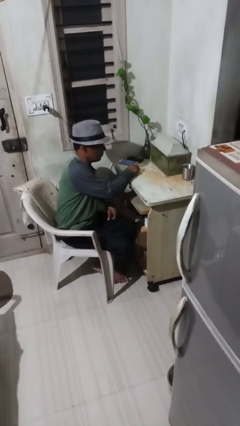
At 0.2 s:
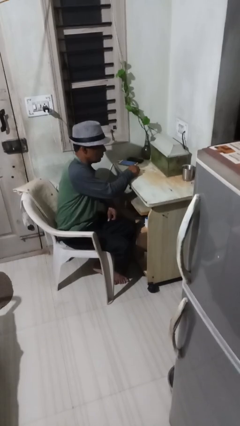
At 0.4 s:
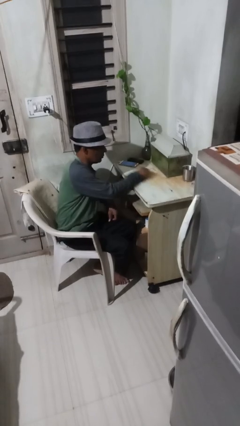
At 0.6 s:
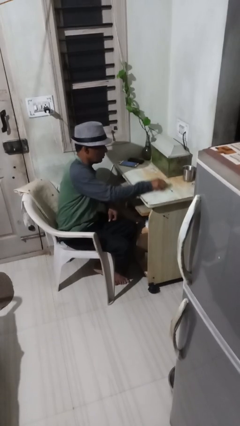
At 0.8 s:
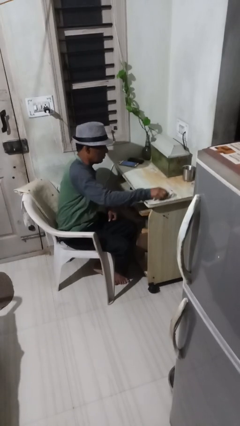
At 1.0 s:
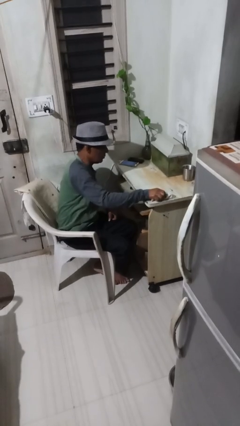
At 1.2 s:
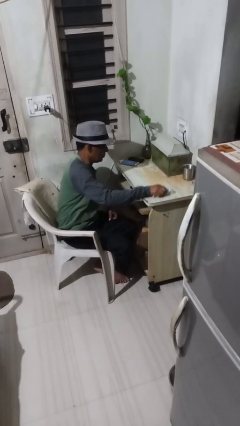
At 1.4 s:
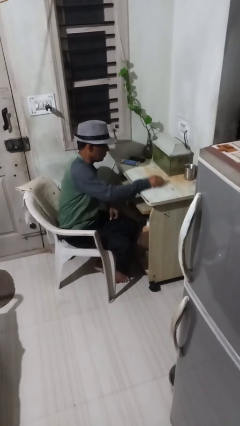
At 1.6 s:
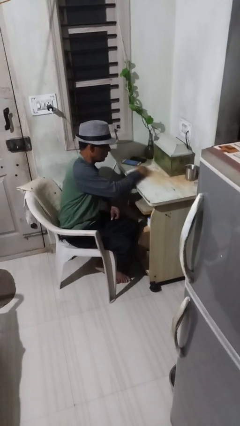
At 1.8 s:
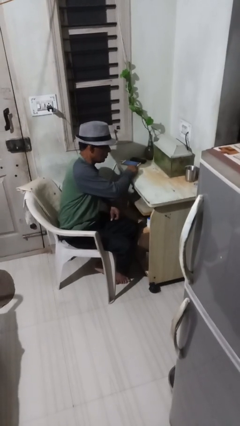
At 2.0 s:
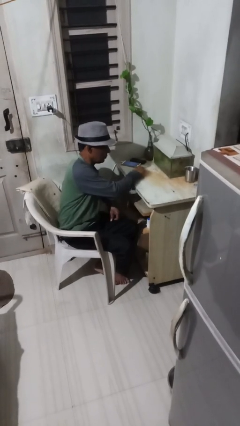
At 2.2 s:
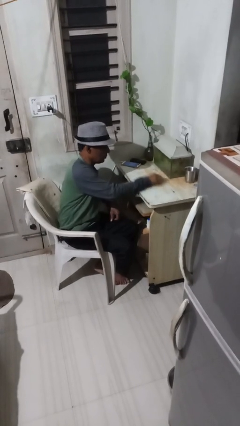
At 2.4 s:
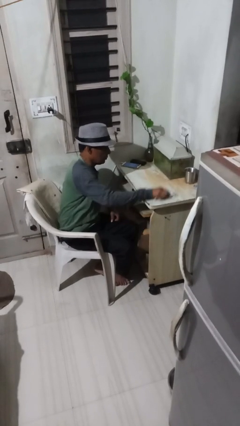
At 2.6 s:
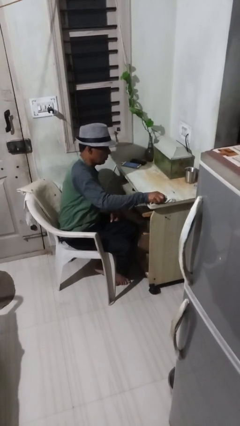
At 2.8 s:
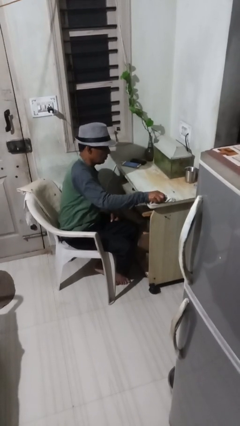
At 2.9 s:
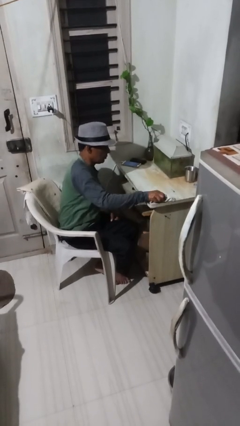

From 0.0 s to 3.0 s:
person cleans table with rag

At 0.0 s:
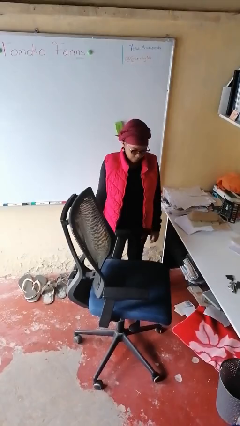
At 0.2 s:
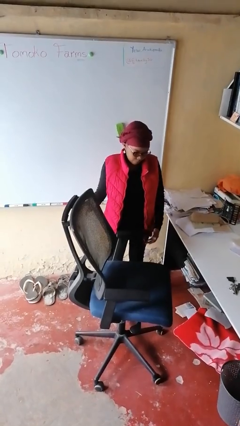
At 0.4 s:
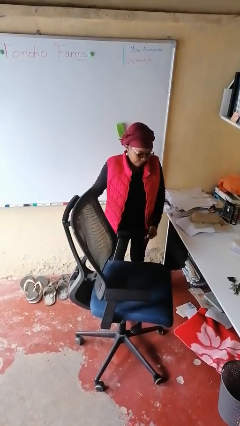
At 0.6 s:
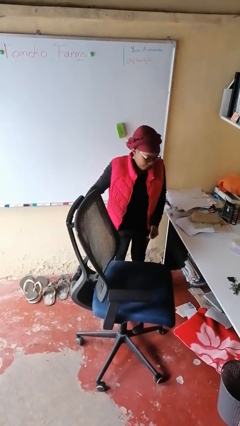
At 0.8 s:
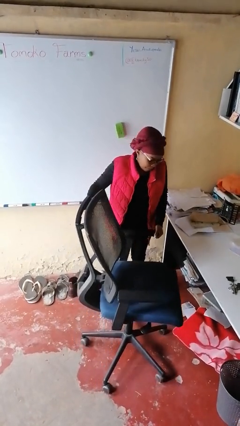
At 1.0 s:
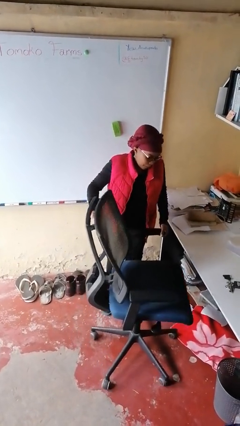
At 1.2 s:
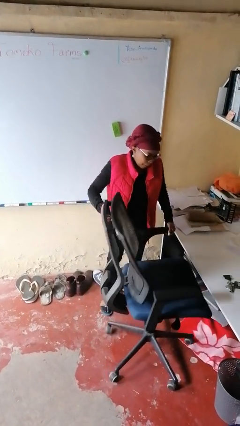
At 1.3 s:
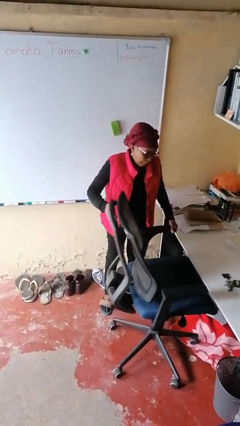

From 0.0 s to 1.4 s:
person pushes in chair

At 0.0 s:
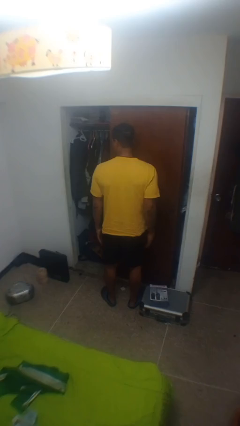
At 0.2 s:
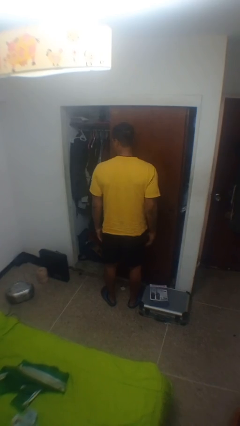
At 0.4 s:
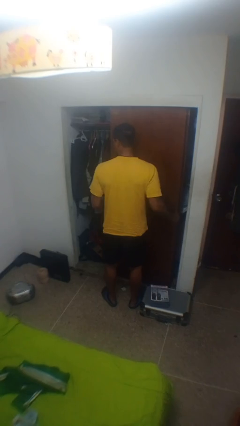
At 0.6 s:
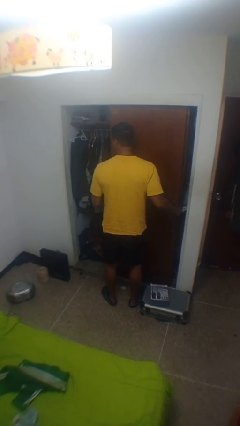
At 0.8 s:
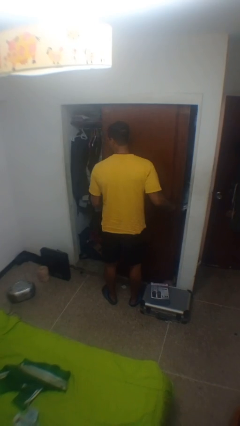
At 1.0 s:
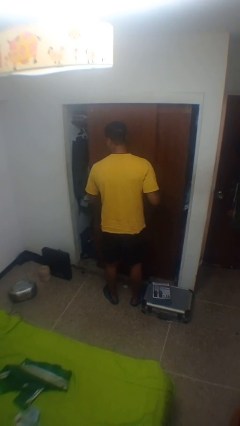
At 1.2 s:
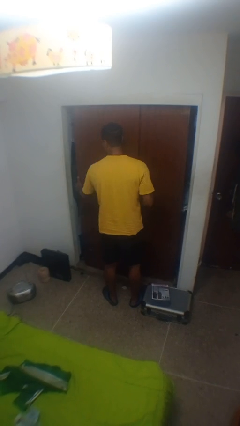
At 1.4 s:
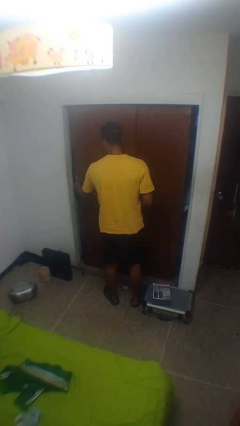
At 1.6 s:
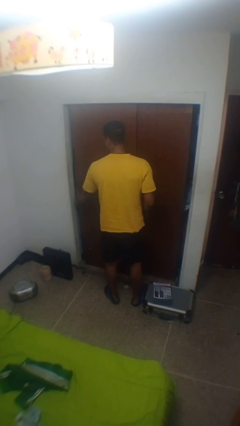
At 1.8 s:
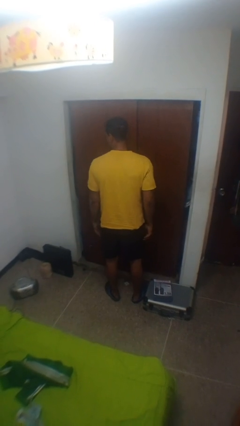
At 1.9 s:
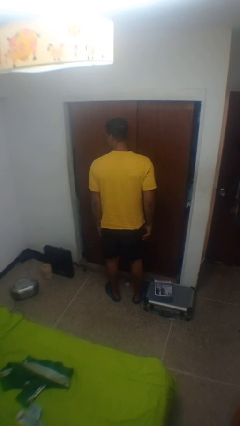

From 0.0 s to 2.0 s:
person closes closet door

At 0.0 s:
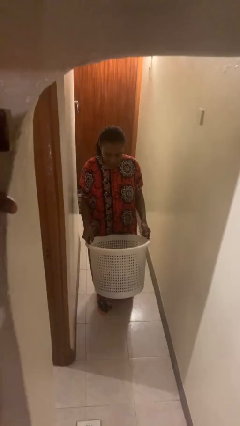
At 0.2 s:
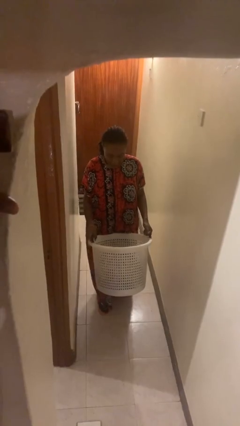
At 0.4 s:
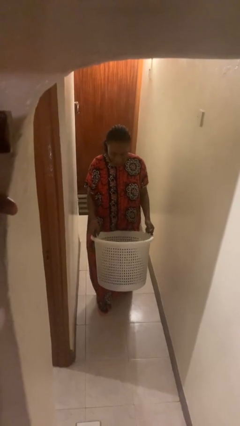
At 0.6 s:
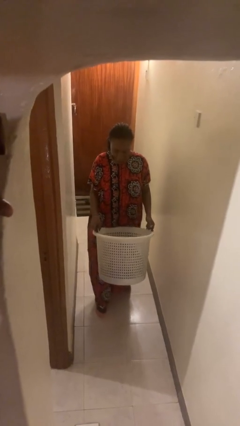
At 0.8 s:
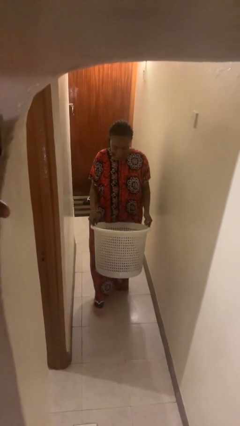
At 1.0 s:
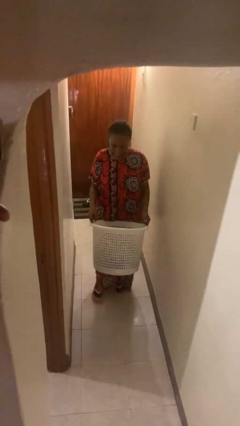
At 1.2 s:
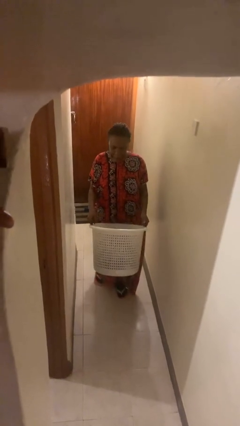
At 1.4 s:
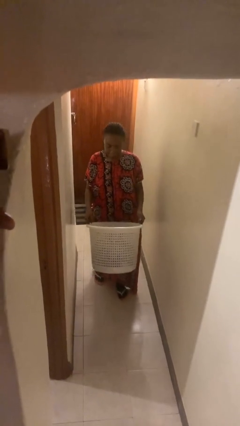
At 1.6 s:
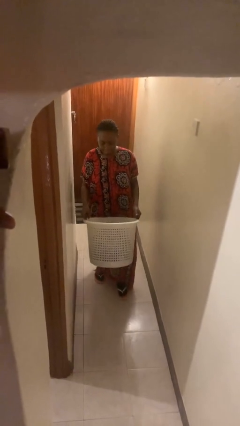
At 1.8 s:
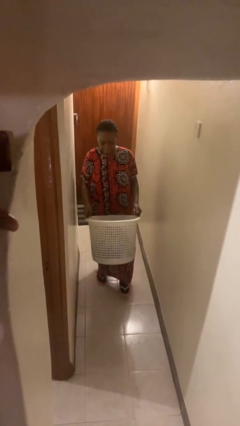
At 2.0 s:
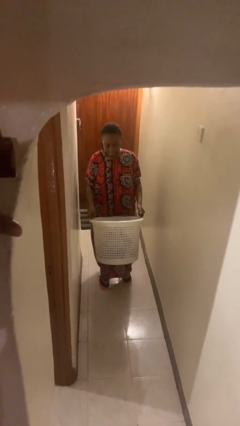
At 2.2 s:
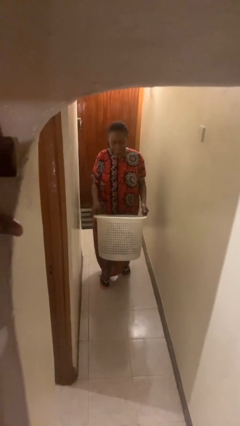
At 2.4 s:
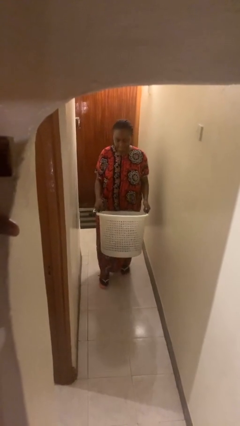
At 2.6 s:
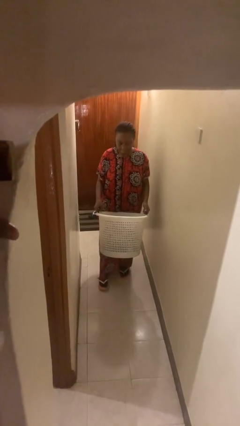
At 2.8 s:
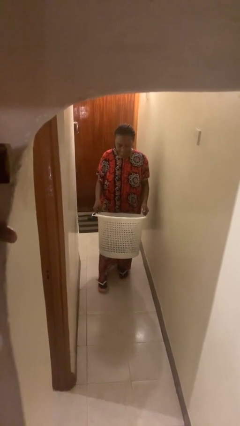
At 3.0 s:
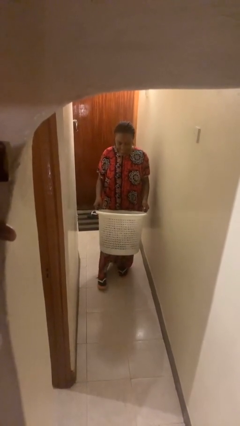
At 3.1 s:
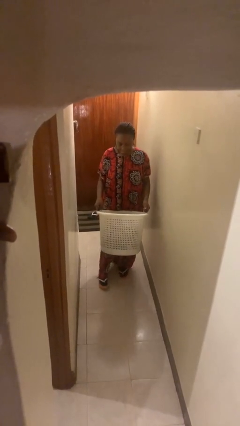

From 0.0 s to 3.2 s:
person carries laundry basket

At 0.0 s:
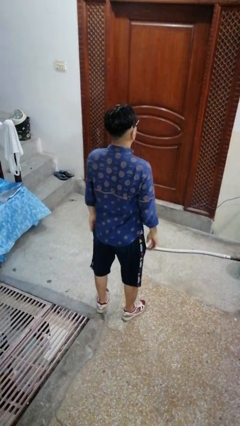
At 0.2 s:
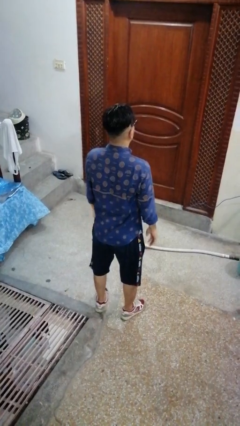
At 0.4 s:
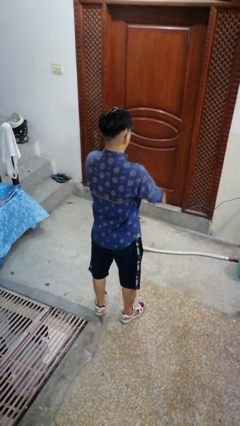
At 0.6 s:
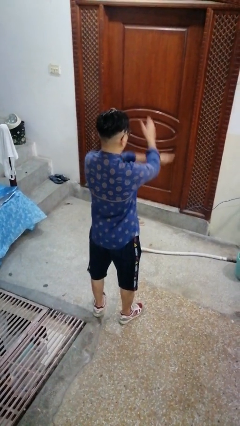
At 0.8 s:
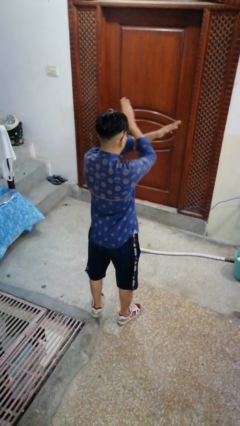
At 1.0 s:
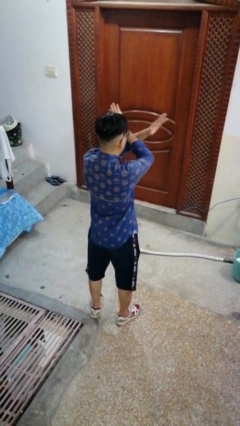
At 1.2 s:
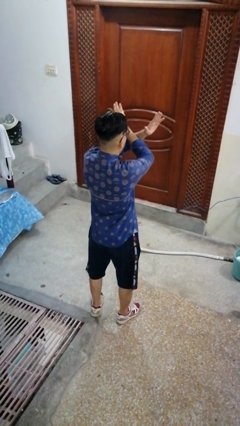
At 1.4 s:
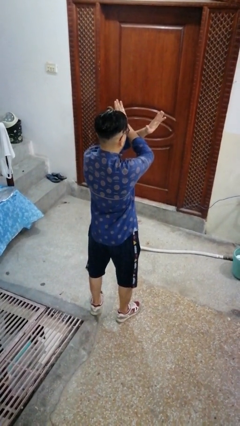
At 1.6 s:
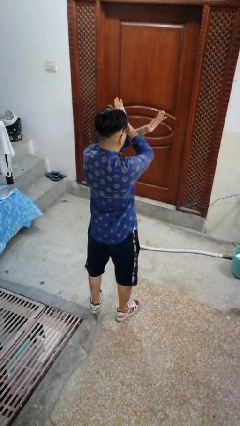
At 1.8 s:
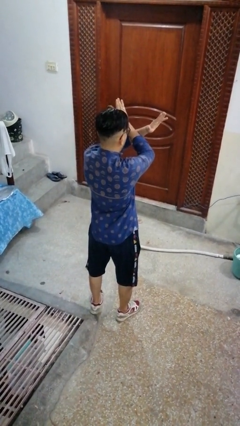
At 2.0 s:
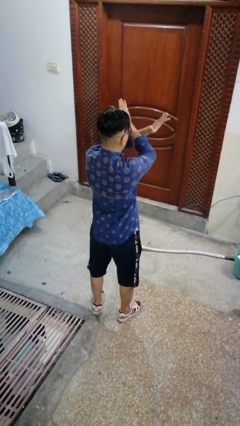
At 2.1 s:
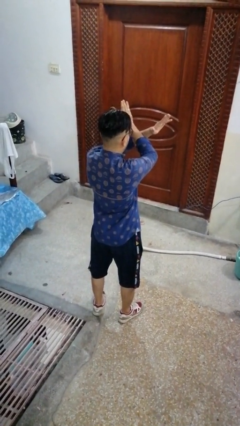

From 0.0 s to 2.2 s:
person gestures arms x

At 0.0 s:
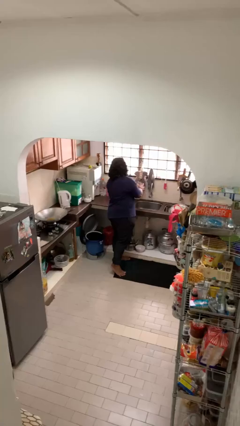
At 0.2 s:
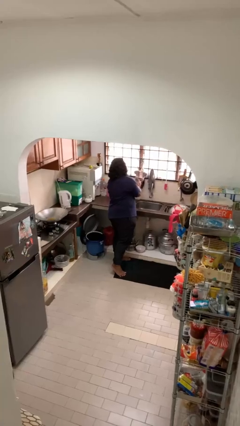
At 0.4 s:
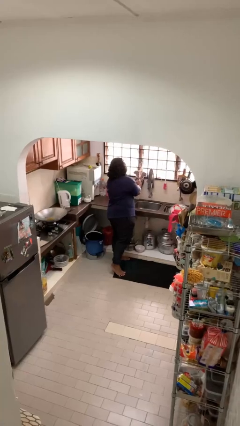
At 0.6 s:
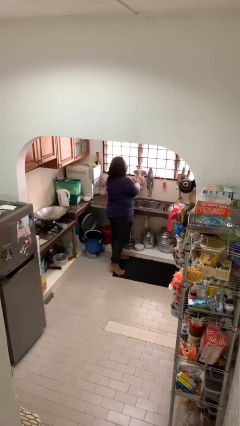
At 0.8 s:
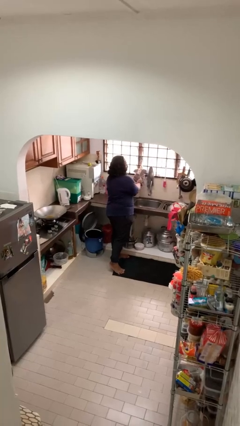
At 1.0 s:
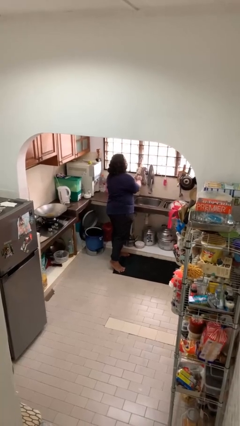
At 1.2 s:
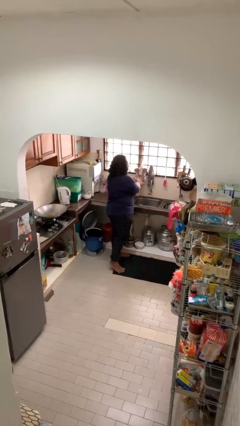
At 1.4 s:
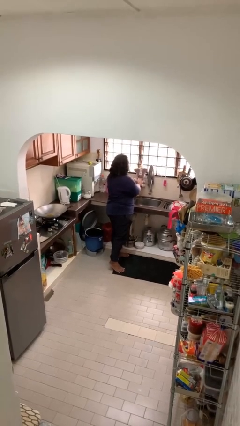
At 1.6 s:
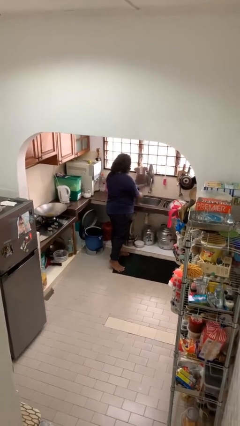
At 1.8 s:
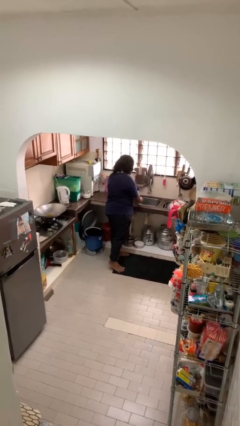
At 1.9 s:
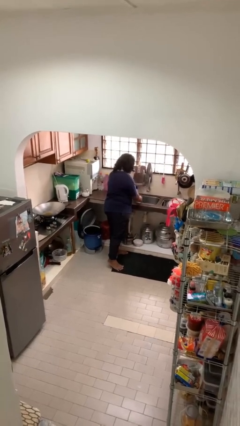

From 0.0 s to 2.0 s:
person dries hands with towel

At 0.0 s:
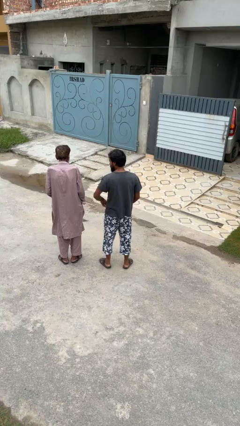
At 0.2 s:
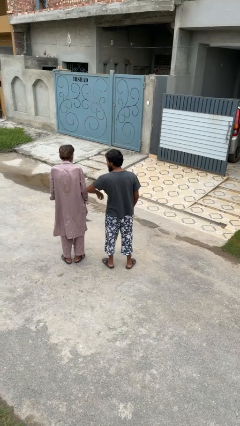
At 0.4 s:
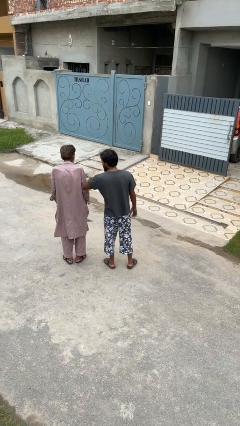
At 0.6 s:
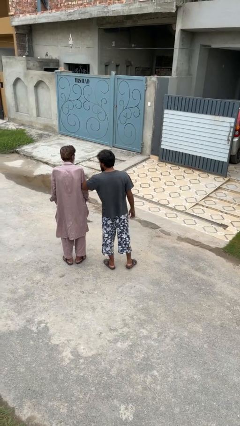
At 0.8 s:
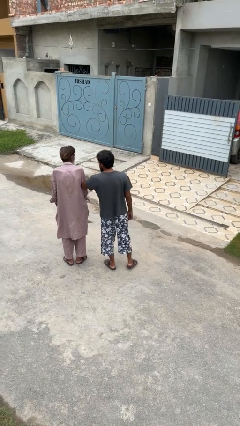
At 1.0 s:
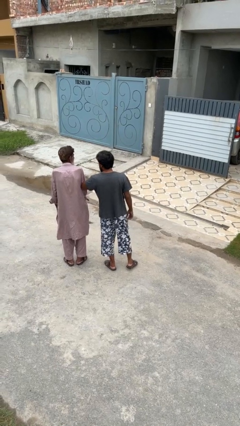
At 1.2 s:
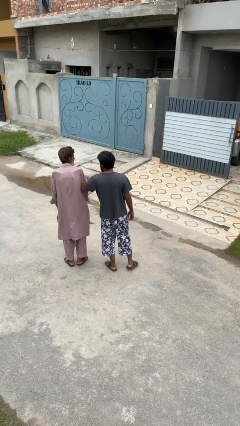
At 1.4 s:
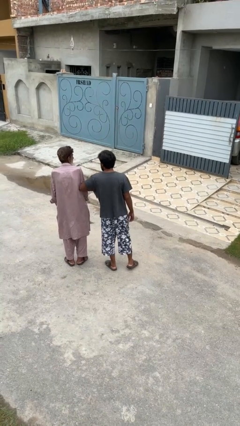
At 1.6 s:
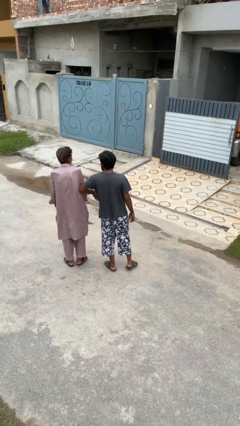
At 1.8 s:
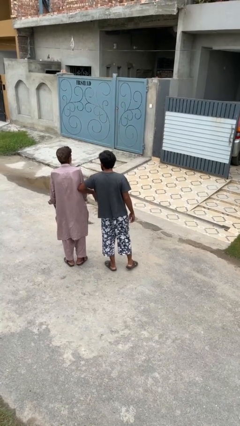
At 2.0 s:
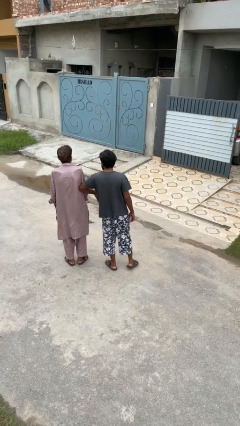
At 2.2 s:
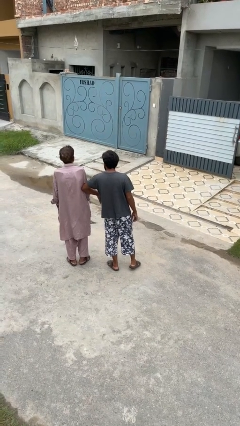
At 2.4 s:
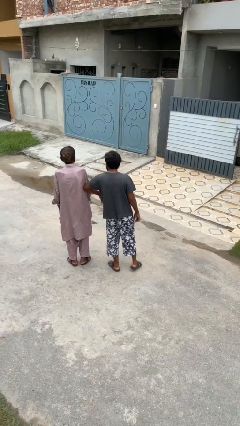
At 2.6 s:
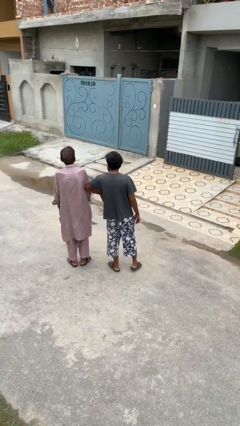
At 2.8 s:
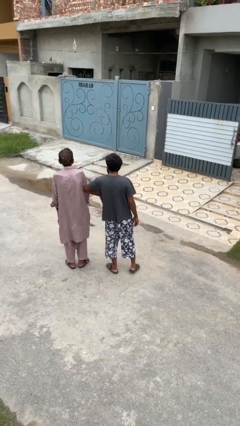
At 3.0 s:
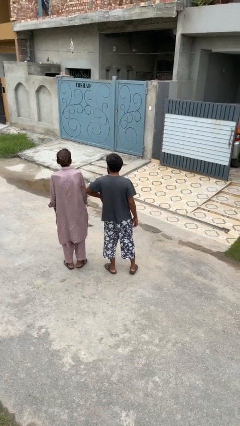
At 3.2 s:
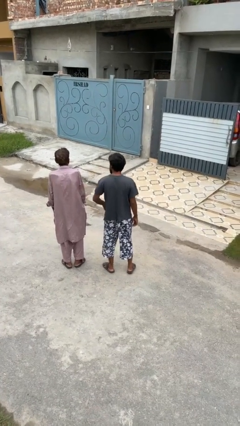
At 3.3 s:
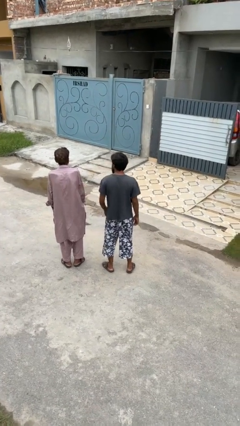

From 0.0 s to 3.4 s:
person nudges person with elbow
